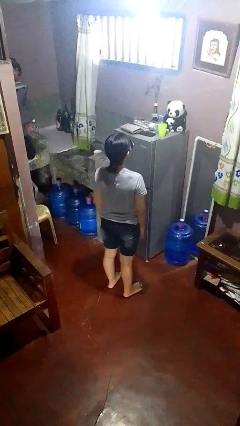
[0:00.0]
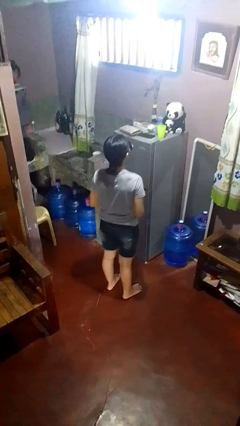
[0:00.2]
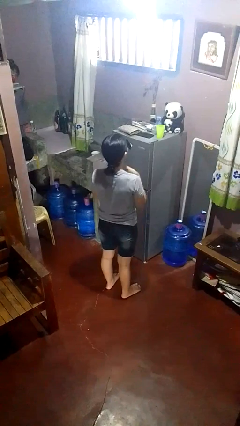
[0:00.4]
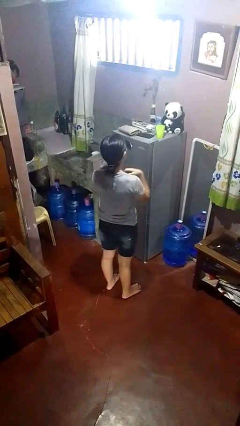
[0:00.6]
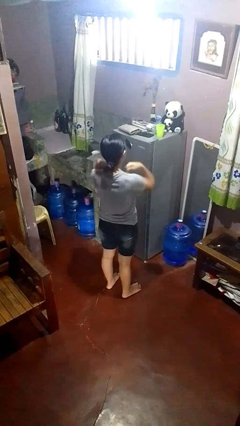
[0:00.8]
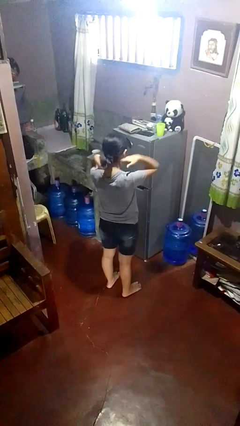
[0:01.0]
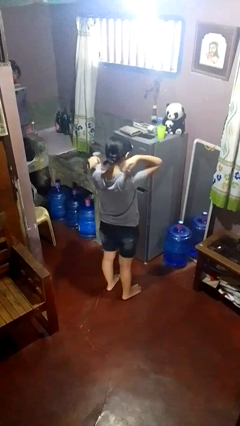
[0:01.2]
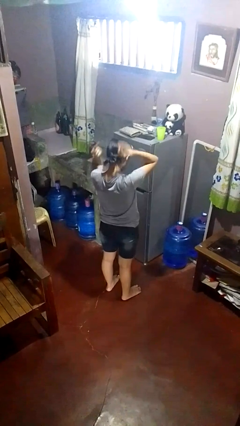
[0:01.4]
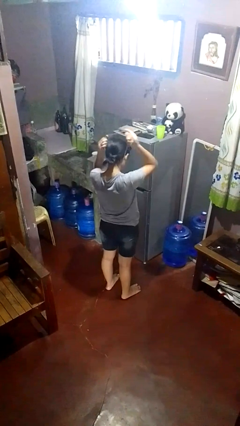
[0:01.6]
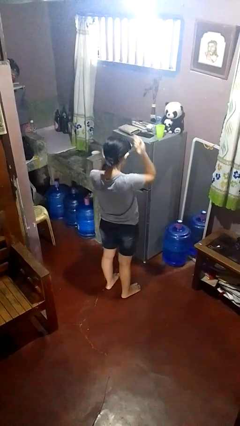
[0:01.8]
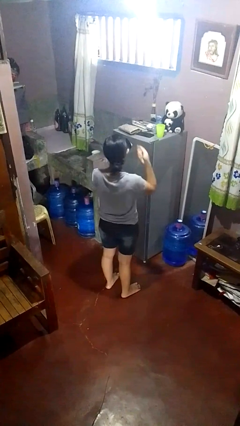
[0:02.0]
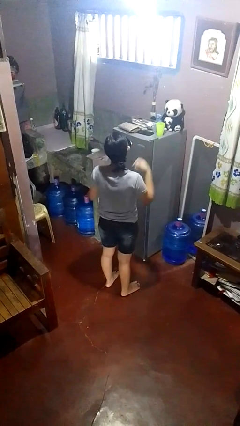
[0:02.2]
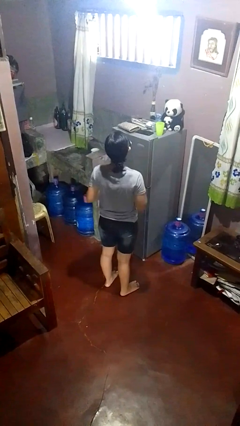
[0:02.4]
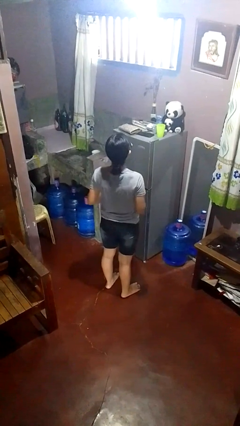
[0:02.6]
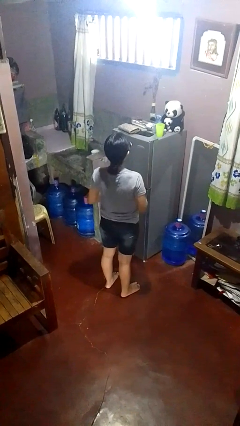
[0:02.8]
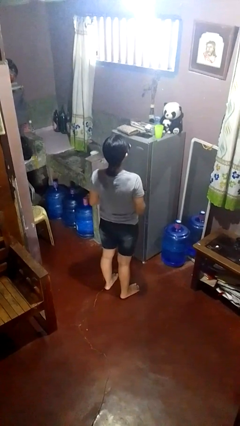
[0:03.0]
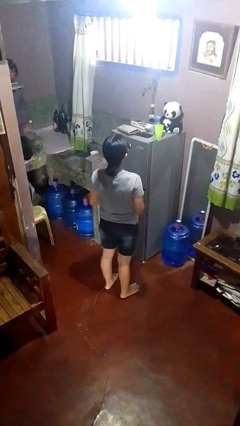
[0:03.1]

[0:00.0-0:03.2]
person takes off necklace

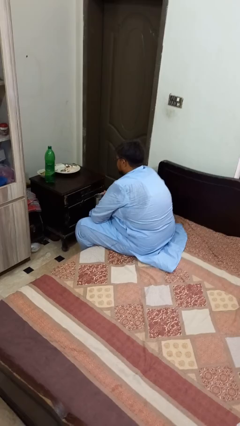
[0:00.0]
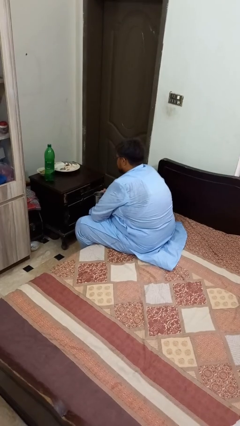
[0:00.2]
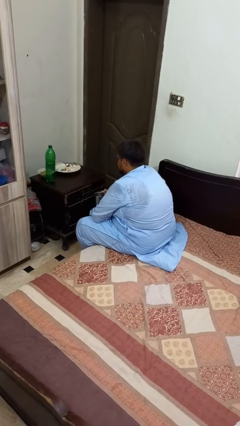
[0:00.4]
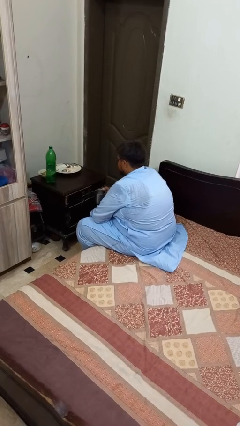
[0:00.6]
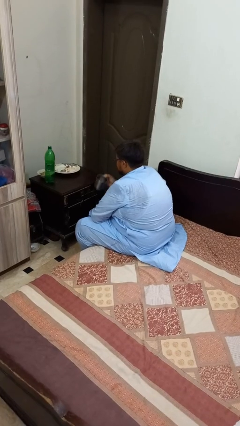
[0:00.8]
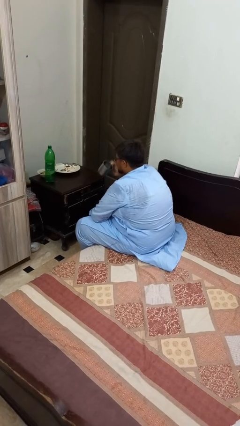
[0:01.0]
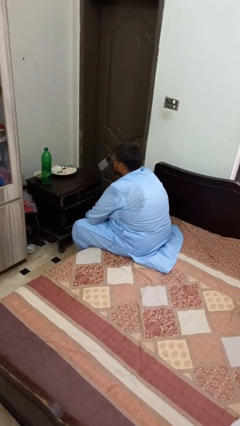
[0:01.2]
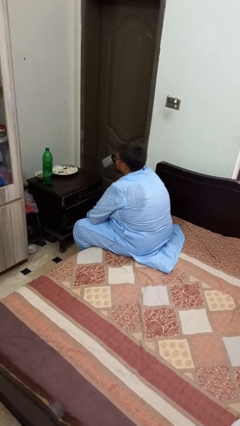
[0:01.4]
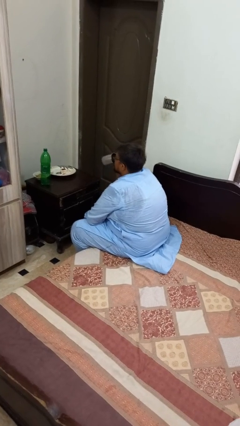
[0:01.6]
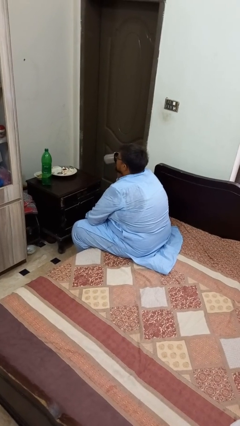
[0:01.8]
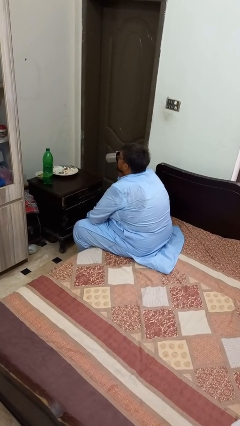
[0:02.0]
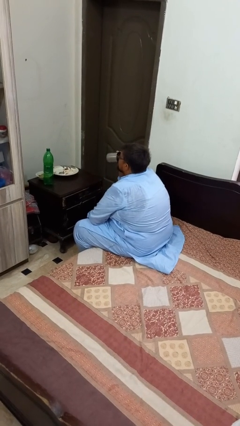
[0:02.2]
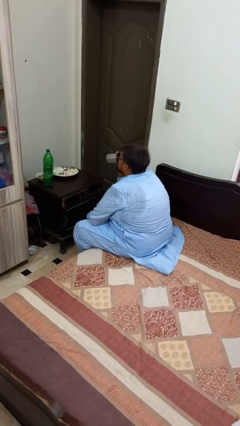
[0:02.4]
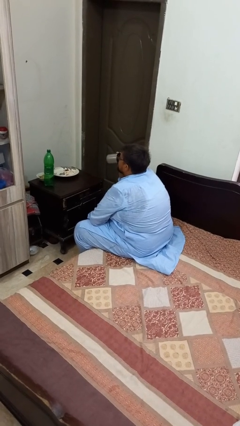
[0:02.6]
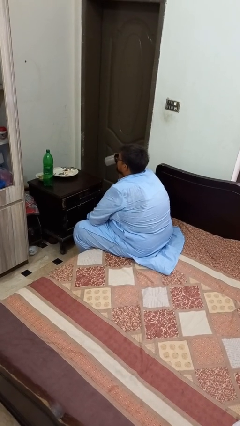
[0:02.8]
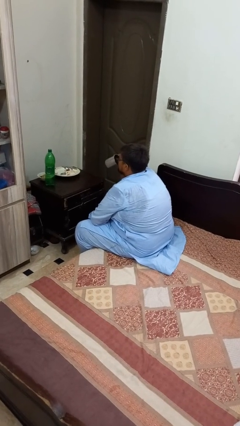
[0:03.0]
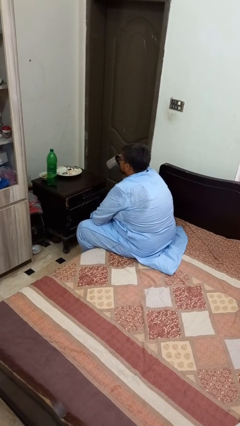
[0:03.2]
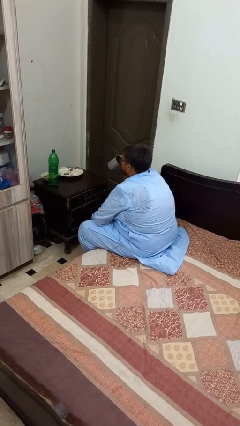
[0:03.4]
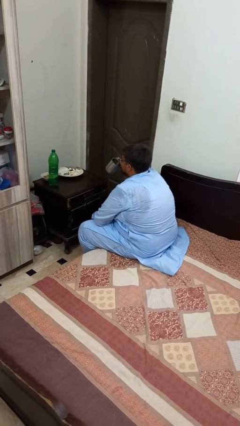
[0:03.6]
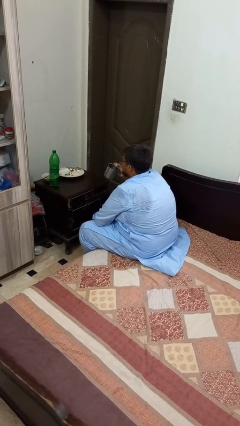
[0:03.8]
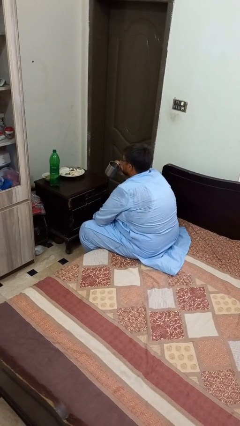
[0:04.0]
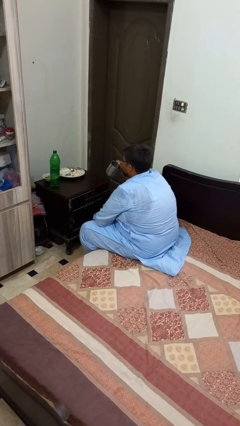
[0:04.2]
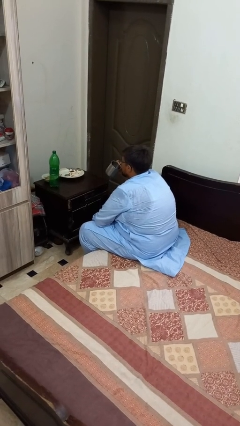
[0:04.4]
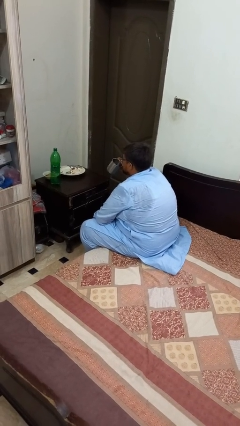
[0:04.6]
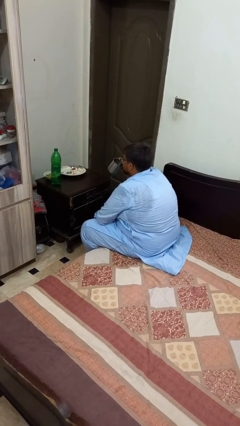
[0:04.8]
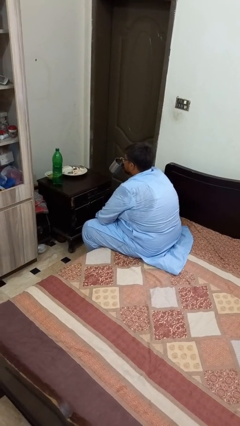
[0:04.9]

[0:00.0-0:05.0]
person drinks from mug

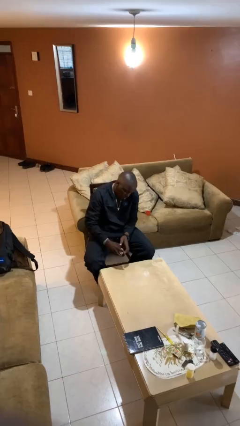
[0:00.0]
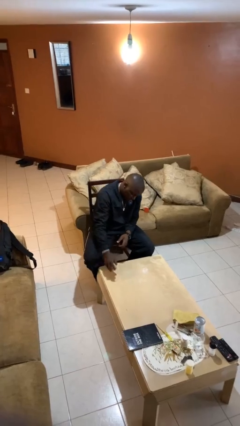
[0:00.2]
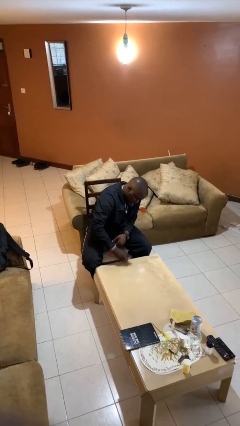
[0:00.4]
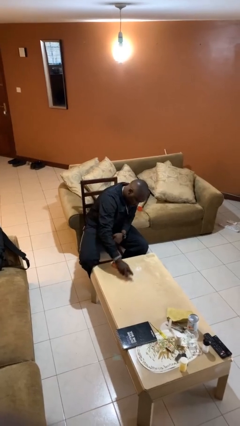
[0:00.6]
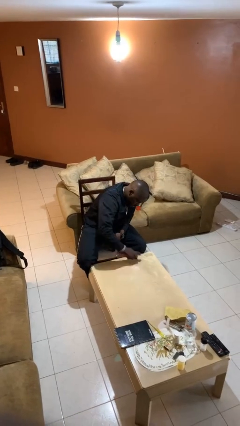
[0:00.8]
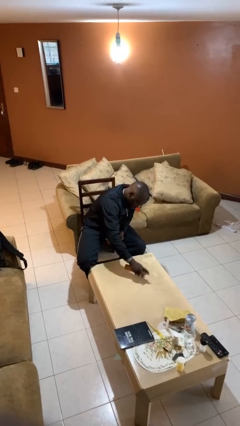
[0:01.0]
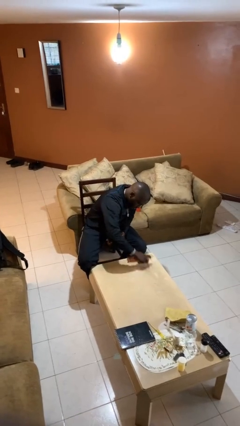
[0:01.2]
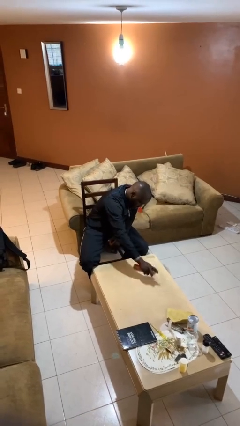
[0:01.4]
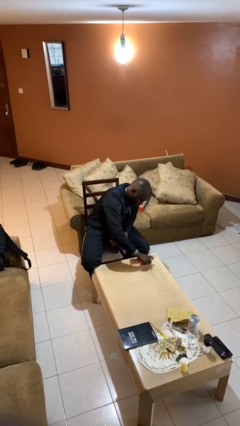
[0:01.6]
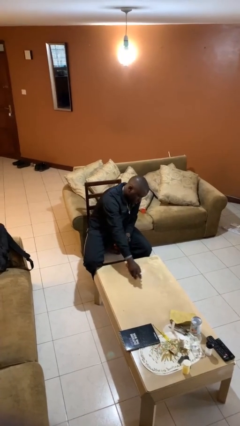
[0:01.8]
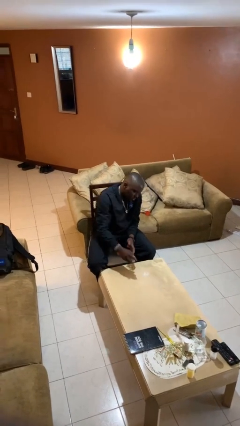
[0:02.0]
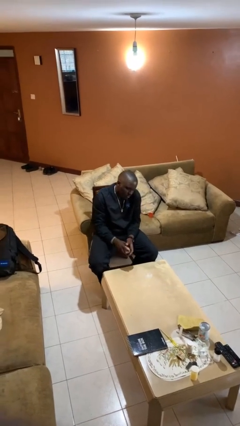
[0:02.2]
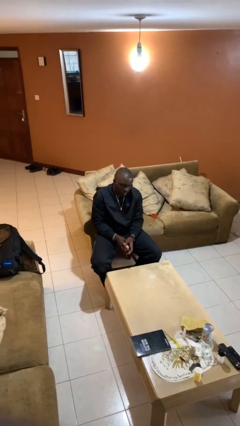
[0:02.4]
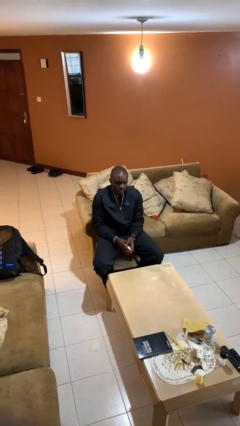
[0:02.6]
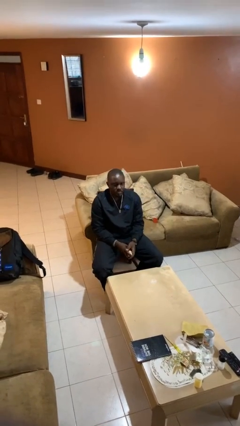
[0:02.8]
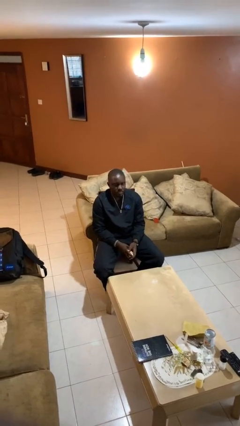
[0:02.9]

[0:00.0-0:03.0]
person sprays from bottle

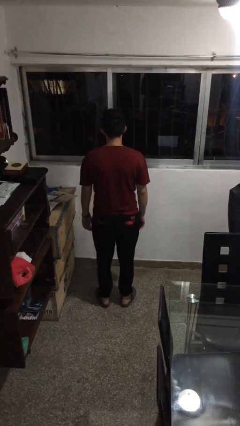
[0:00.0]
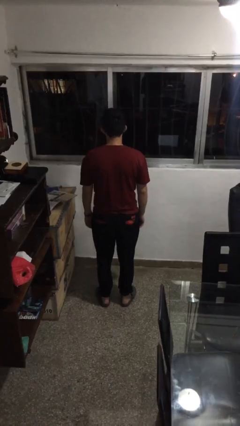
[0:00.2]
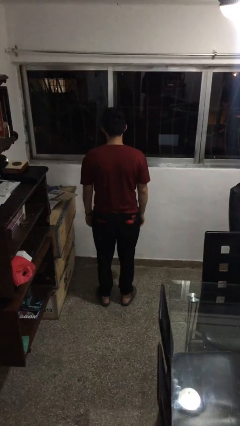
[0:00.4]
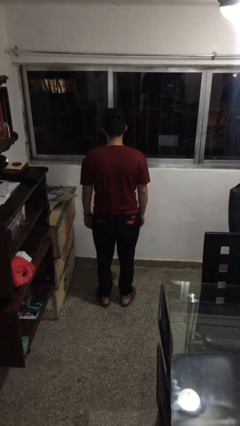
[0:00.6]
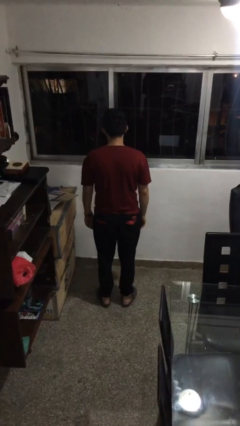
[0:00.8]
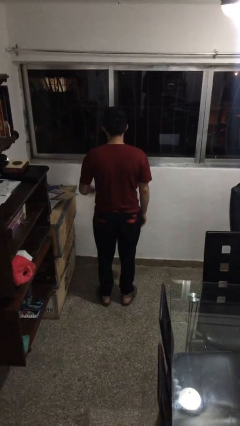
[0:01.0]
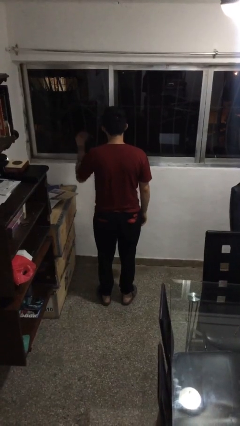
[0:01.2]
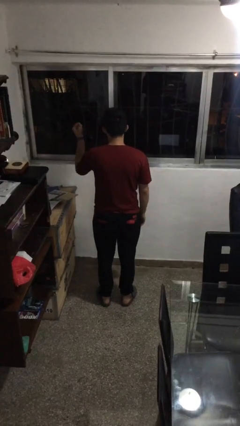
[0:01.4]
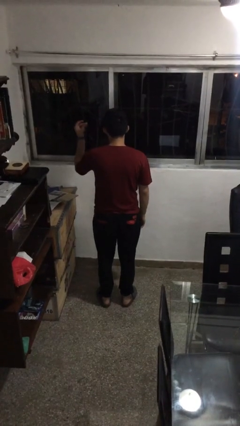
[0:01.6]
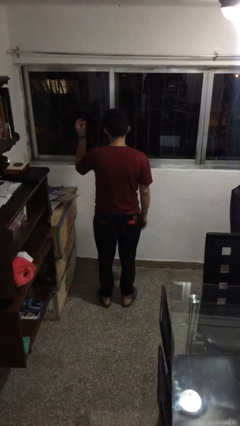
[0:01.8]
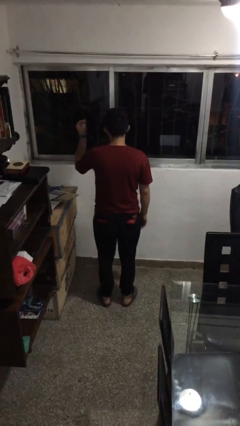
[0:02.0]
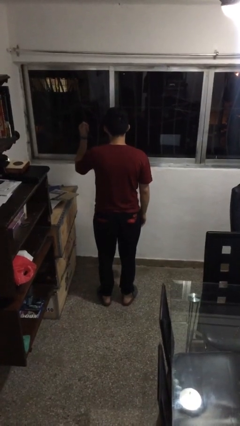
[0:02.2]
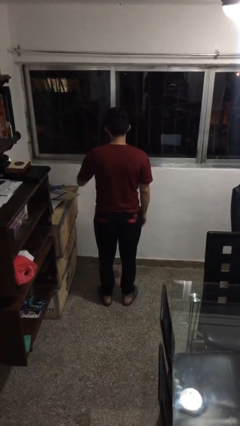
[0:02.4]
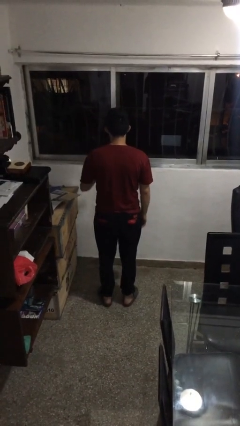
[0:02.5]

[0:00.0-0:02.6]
person snaps fingers

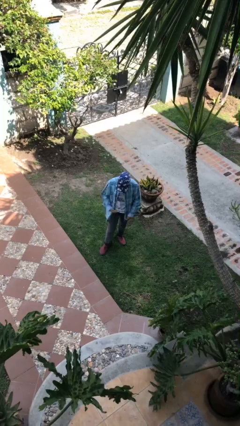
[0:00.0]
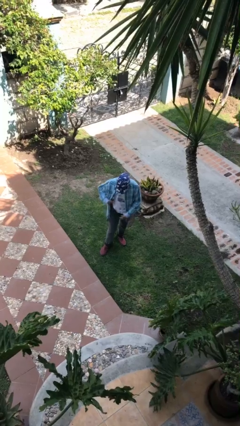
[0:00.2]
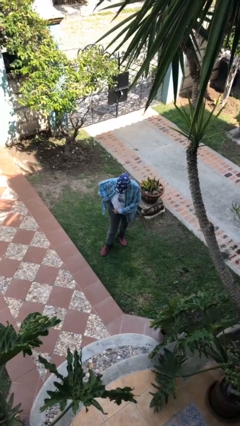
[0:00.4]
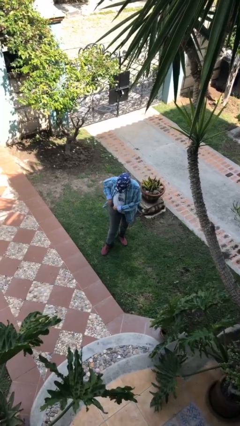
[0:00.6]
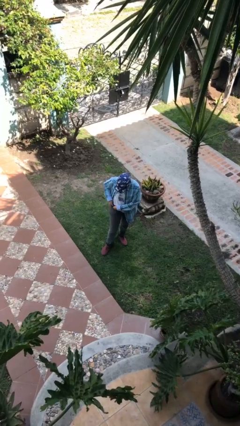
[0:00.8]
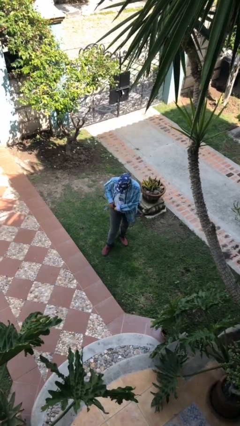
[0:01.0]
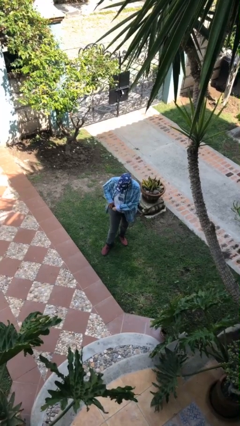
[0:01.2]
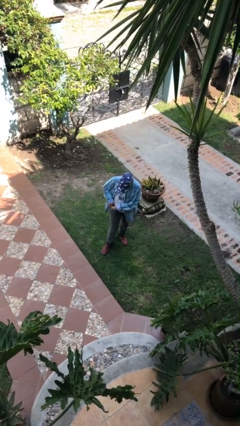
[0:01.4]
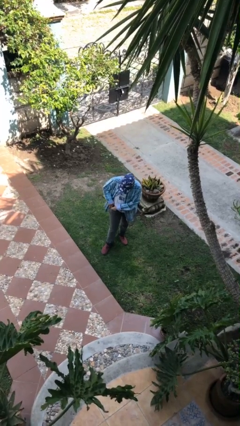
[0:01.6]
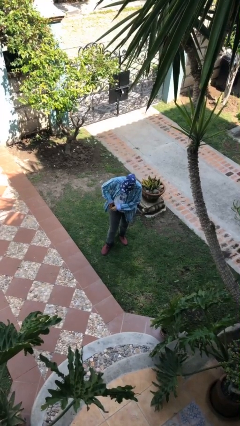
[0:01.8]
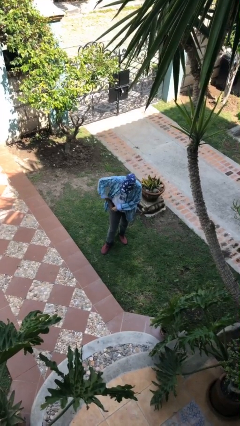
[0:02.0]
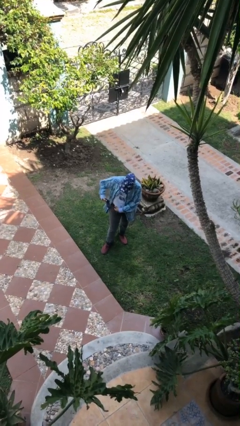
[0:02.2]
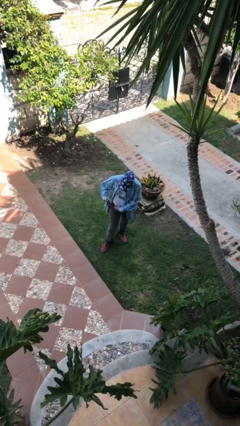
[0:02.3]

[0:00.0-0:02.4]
person takes phone from pocket

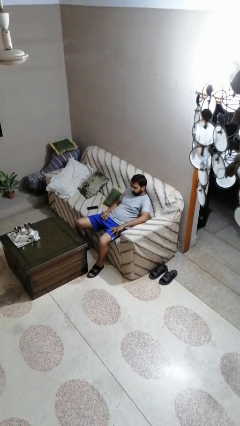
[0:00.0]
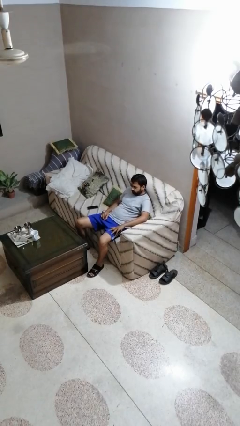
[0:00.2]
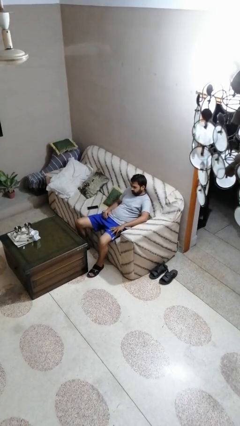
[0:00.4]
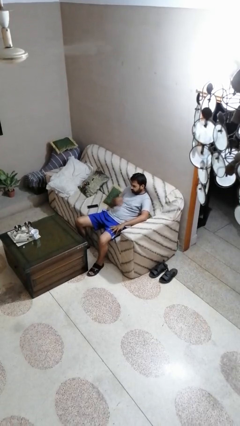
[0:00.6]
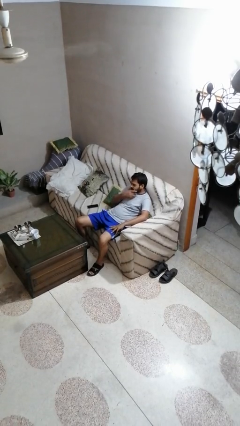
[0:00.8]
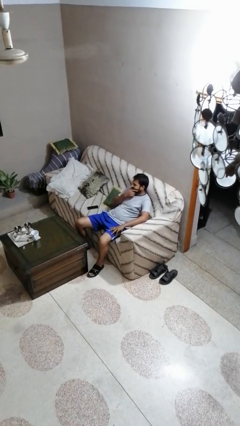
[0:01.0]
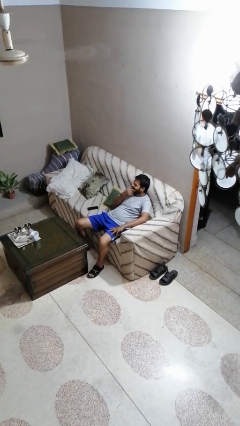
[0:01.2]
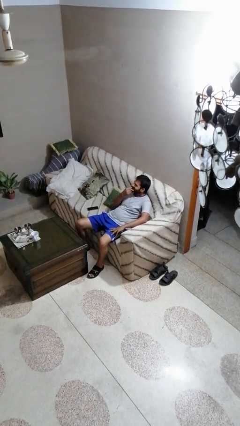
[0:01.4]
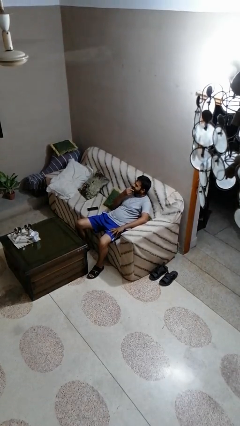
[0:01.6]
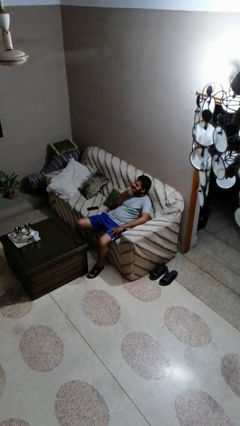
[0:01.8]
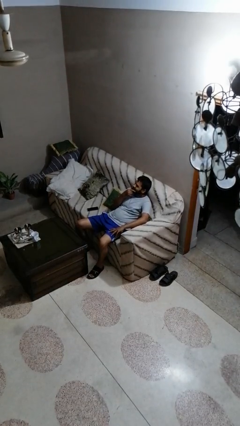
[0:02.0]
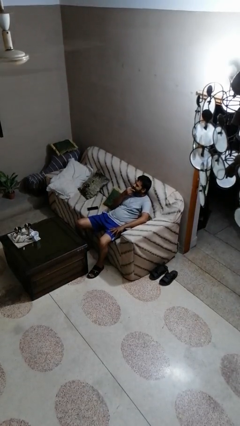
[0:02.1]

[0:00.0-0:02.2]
person strokes chin
